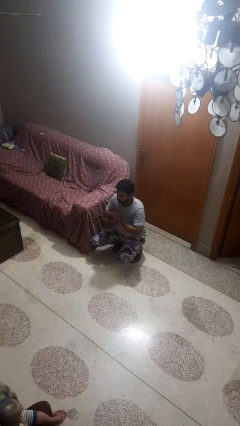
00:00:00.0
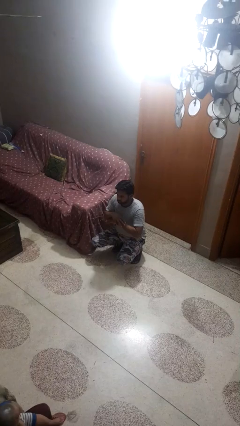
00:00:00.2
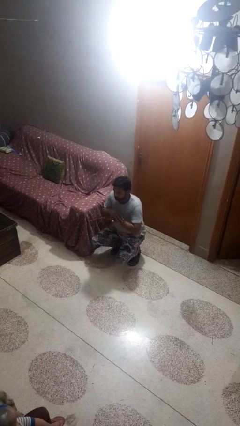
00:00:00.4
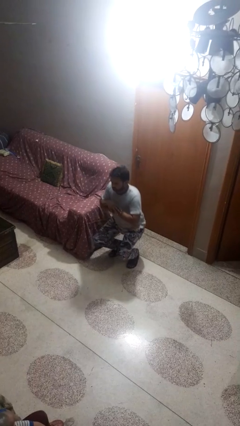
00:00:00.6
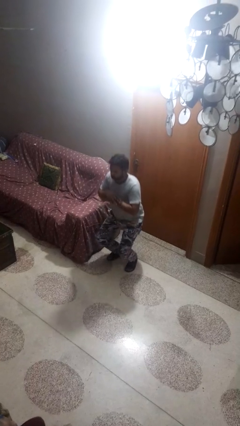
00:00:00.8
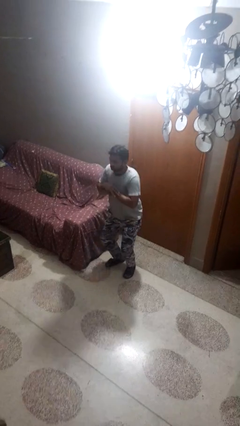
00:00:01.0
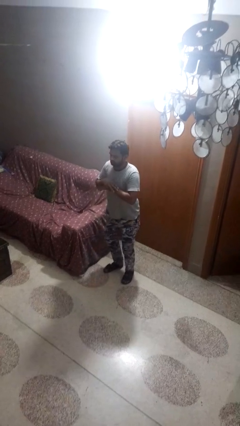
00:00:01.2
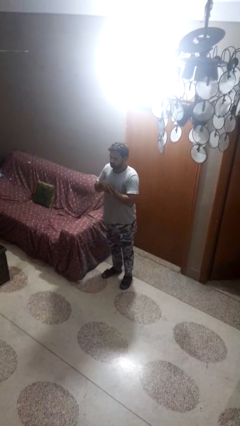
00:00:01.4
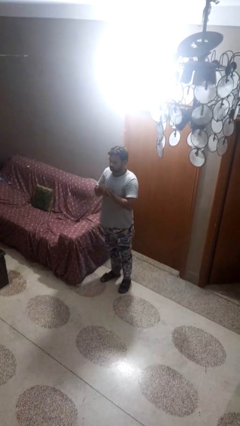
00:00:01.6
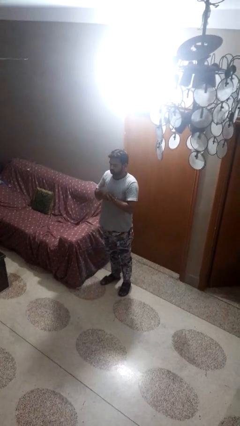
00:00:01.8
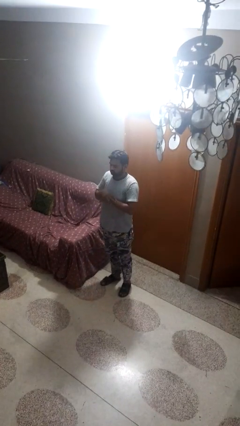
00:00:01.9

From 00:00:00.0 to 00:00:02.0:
person stands up

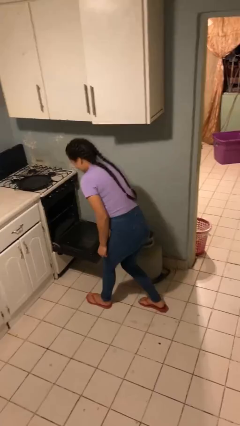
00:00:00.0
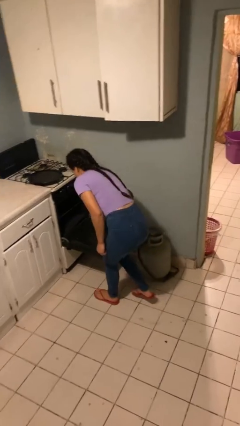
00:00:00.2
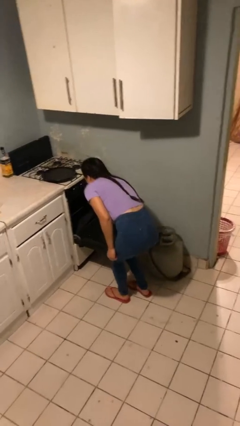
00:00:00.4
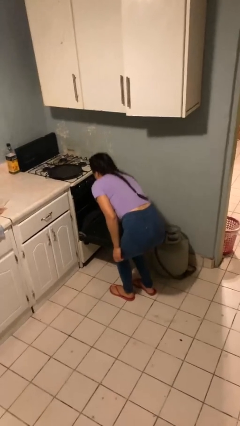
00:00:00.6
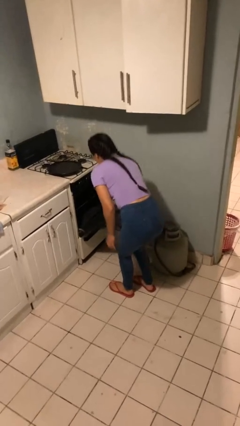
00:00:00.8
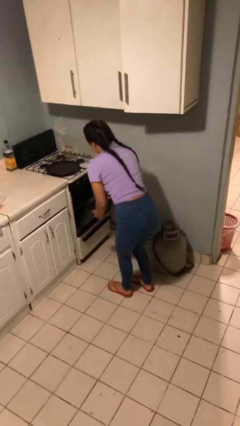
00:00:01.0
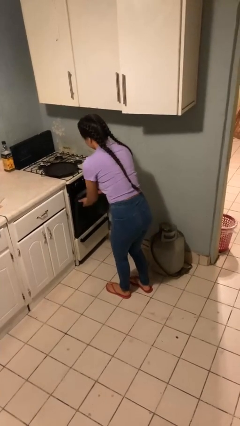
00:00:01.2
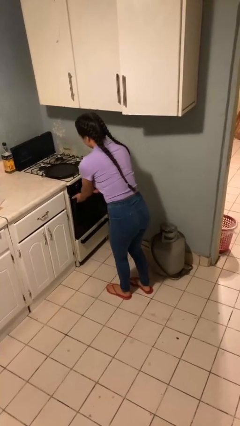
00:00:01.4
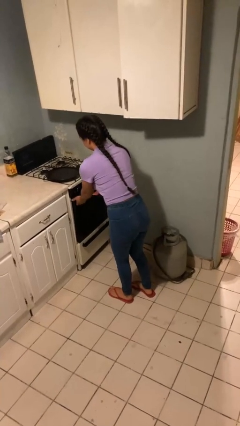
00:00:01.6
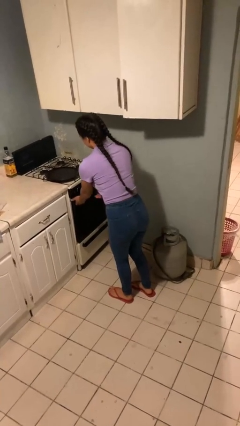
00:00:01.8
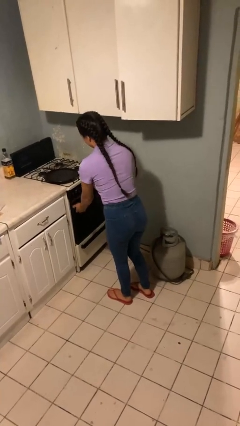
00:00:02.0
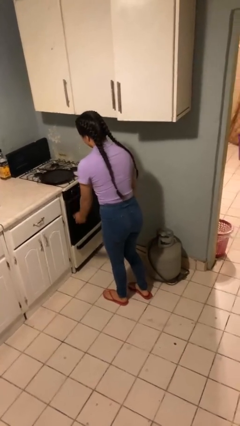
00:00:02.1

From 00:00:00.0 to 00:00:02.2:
person closes oven door

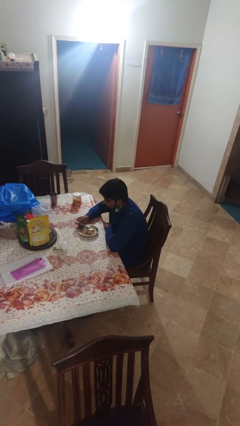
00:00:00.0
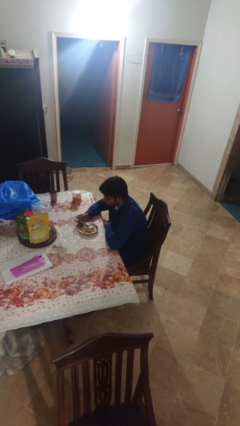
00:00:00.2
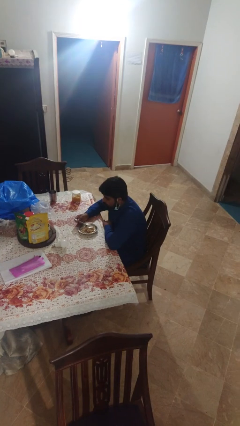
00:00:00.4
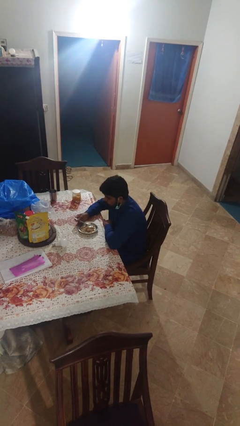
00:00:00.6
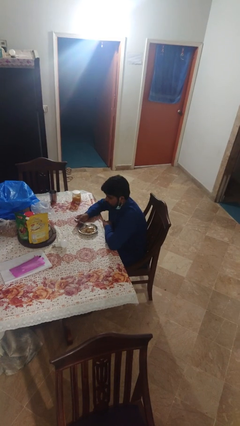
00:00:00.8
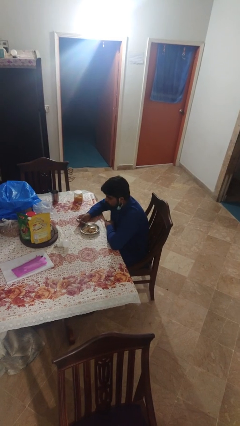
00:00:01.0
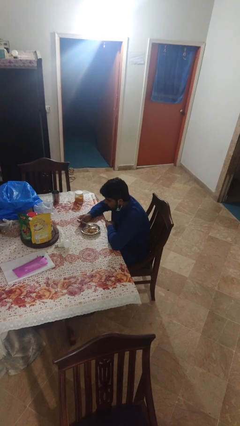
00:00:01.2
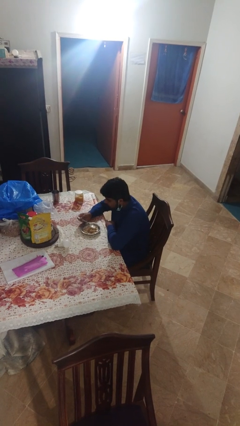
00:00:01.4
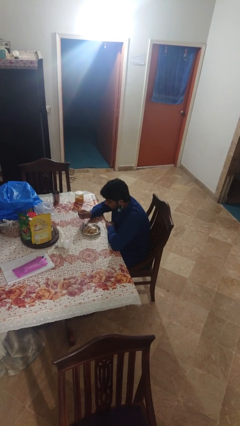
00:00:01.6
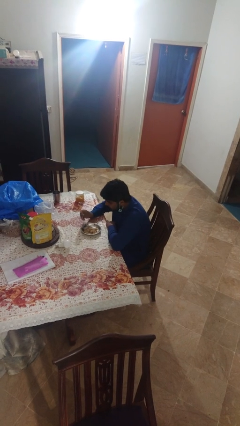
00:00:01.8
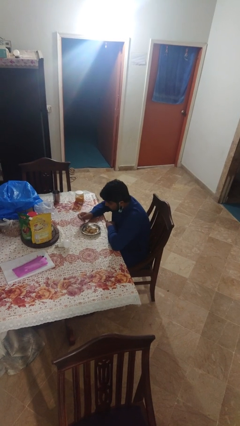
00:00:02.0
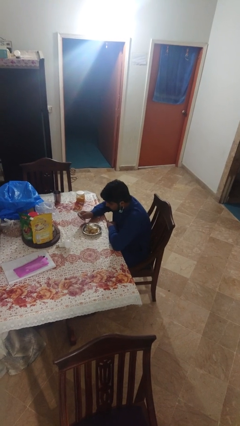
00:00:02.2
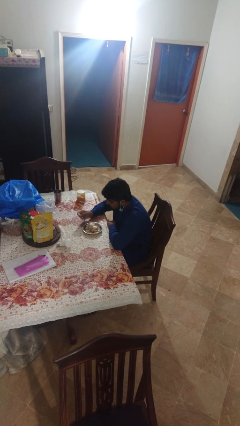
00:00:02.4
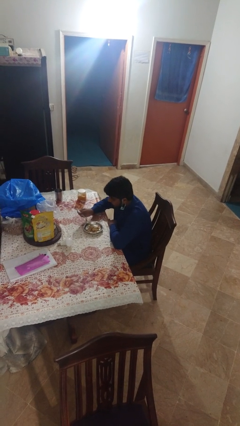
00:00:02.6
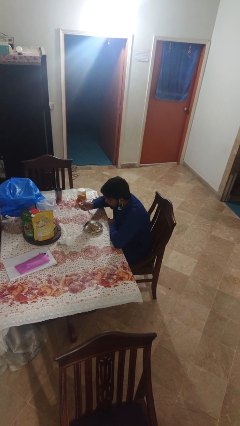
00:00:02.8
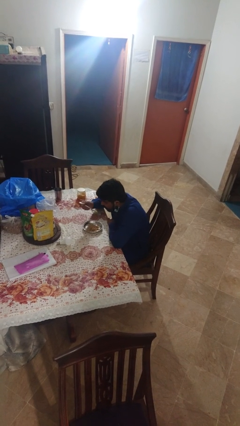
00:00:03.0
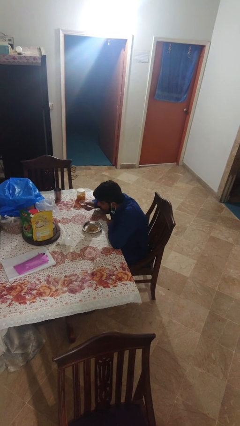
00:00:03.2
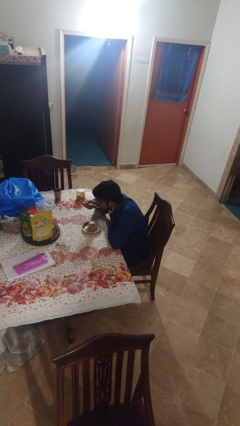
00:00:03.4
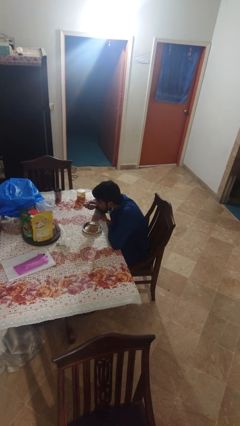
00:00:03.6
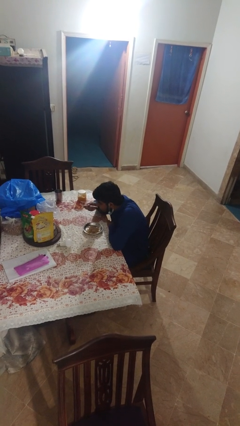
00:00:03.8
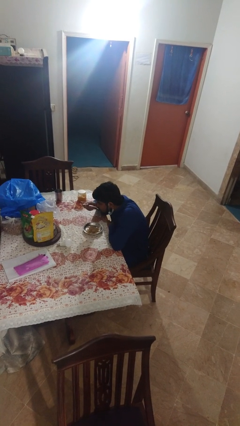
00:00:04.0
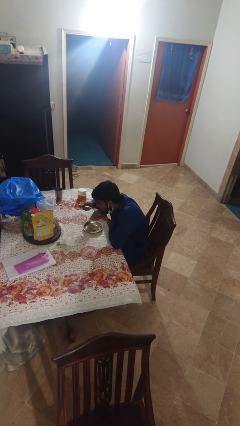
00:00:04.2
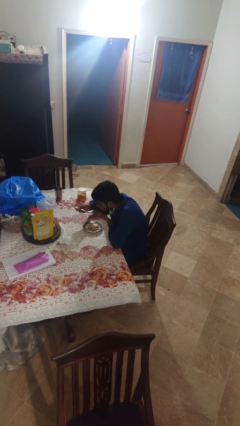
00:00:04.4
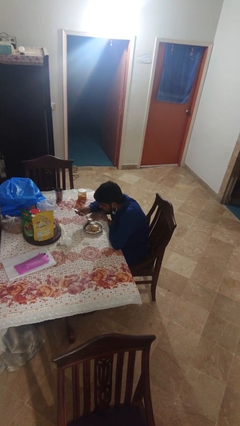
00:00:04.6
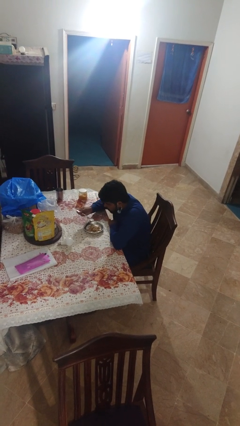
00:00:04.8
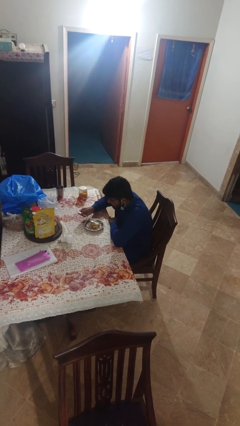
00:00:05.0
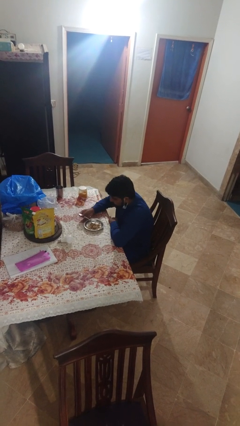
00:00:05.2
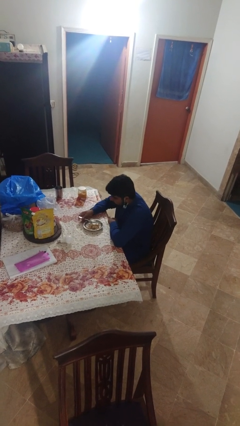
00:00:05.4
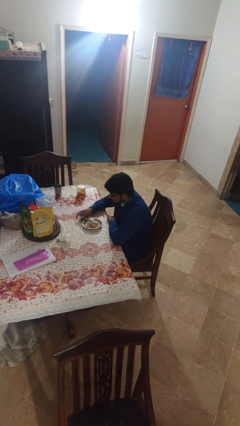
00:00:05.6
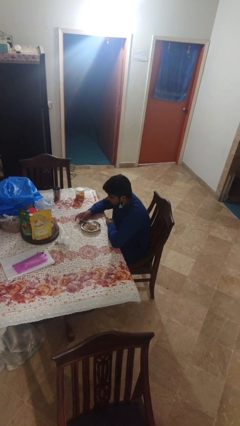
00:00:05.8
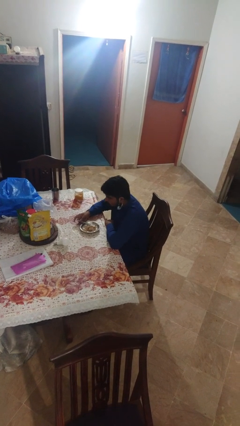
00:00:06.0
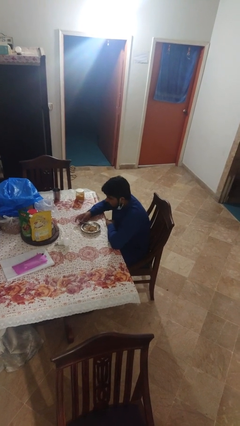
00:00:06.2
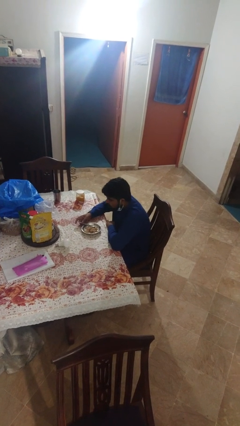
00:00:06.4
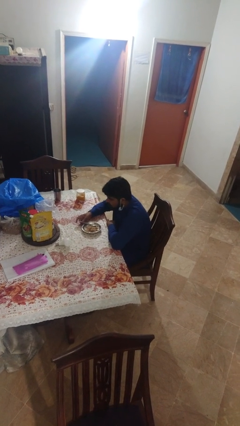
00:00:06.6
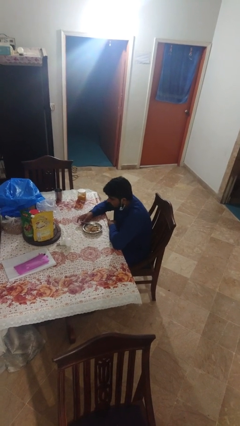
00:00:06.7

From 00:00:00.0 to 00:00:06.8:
person eats with utensil

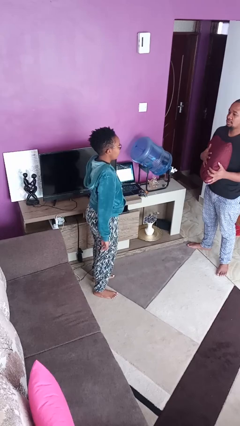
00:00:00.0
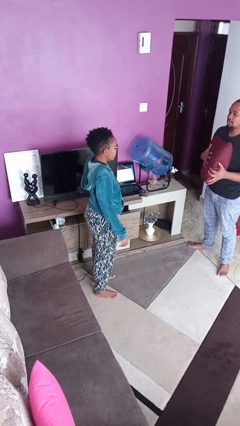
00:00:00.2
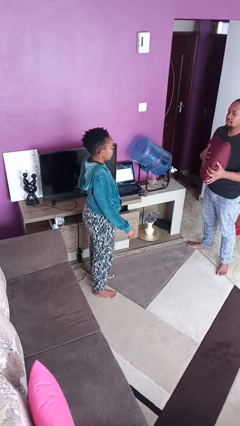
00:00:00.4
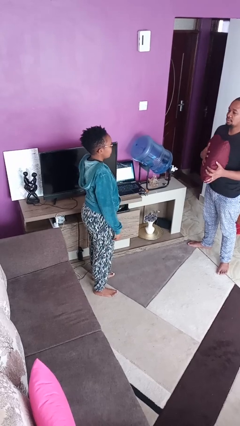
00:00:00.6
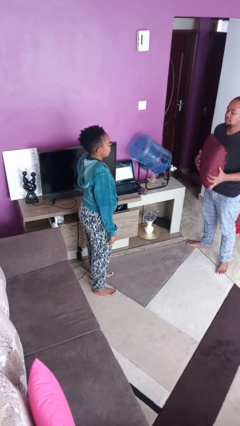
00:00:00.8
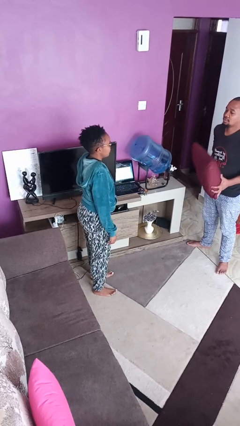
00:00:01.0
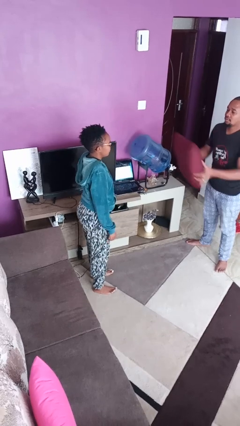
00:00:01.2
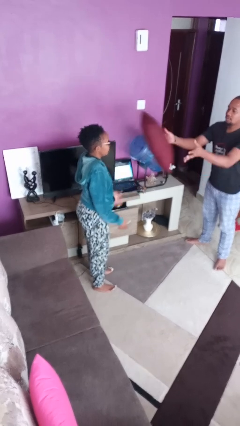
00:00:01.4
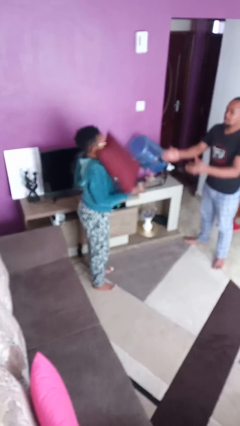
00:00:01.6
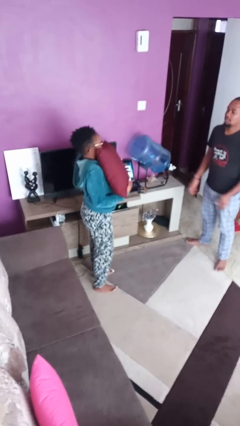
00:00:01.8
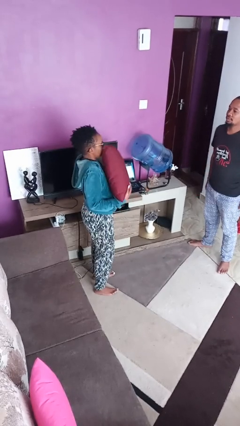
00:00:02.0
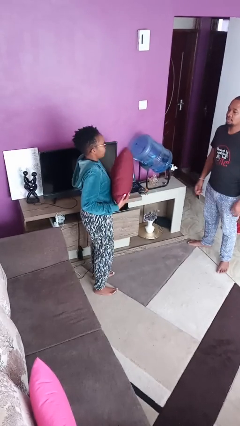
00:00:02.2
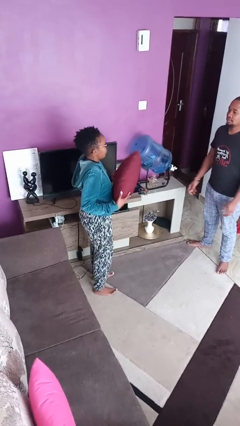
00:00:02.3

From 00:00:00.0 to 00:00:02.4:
person catches object from person

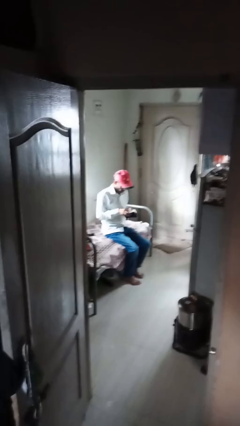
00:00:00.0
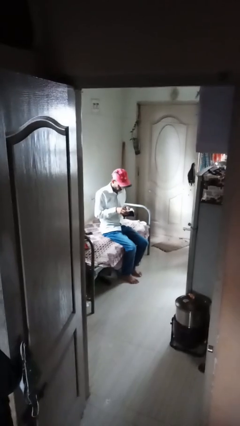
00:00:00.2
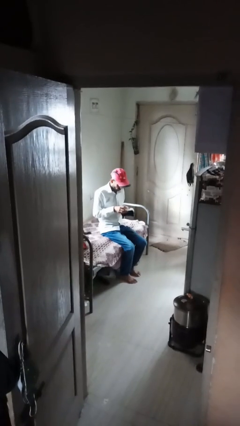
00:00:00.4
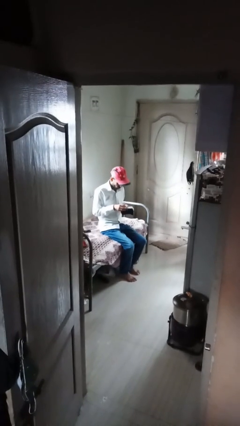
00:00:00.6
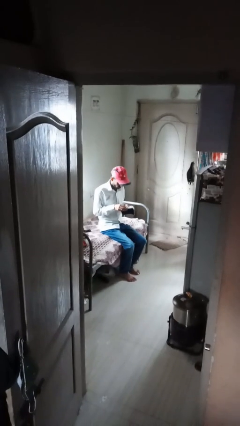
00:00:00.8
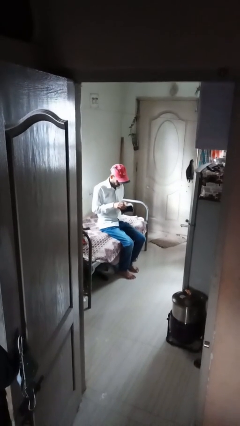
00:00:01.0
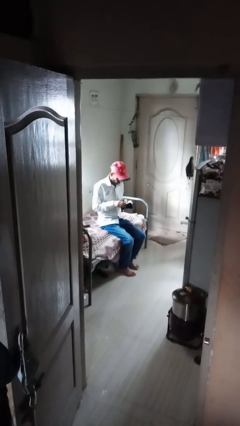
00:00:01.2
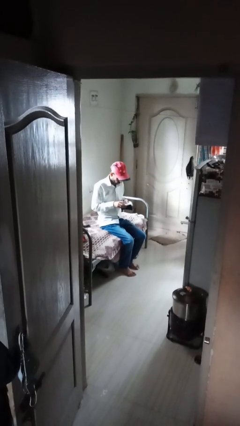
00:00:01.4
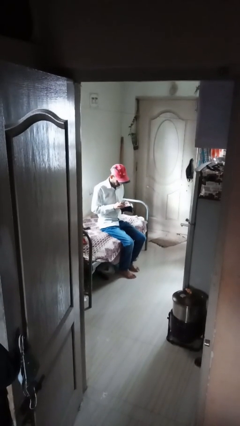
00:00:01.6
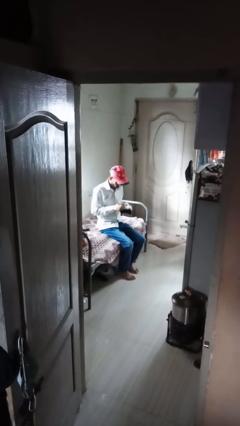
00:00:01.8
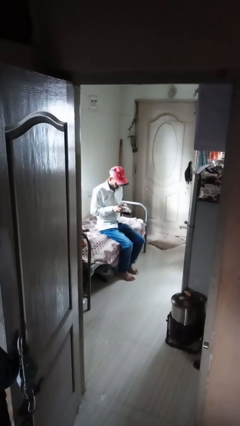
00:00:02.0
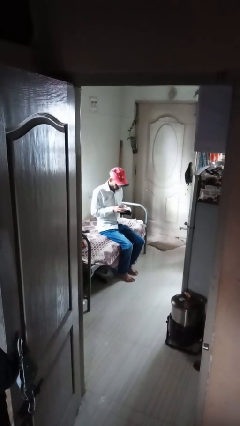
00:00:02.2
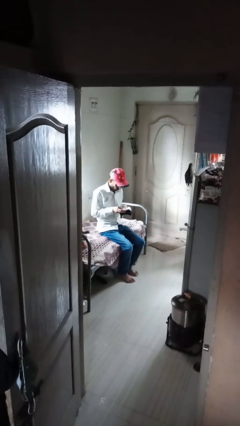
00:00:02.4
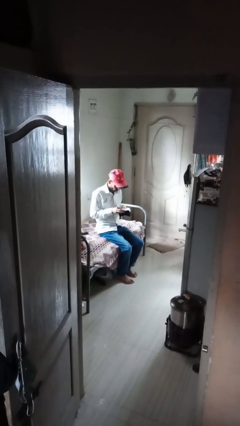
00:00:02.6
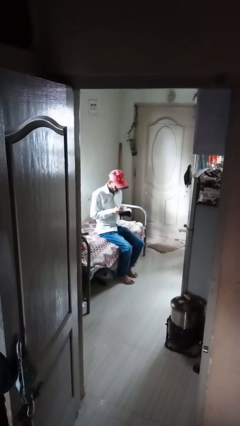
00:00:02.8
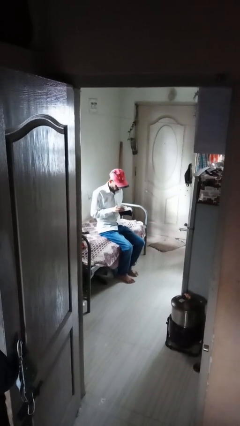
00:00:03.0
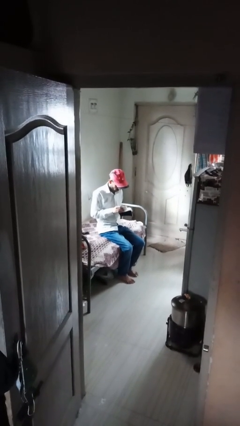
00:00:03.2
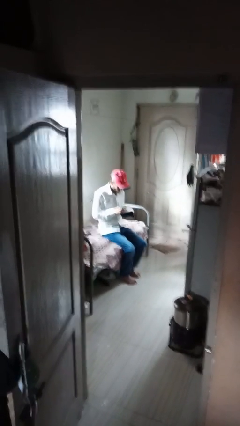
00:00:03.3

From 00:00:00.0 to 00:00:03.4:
person searches in purse

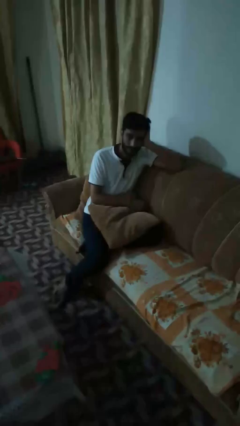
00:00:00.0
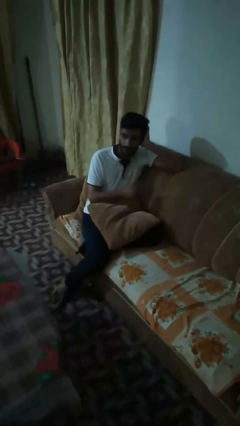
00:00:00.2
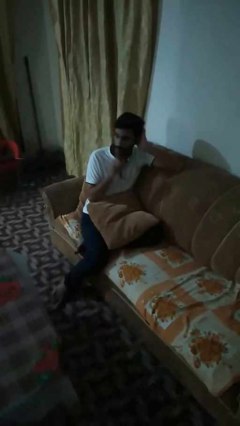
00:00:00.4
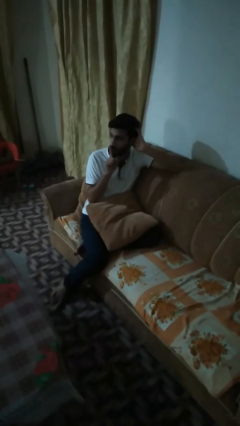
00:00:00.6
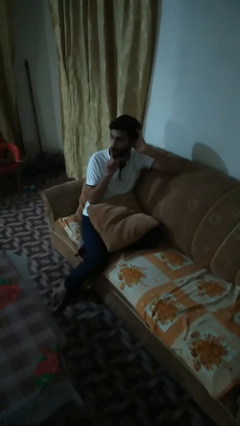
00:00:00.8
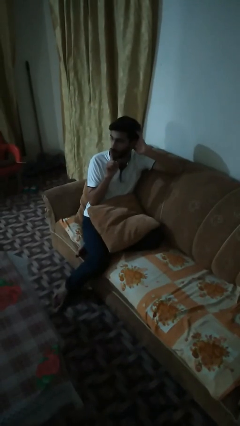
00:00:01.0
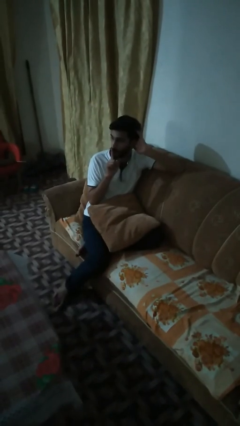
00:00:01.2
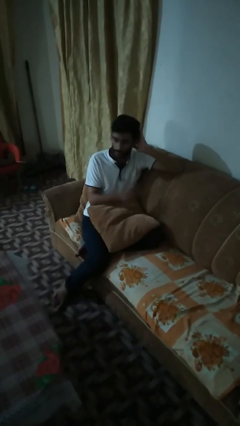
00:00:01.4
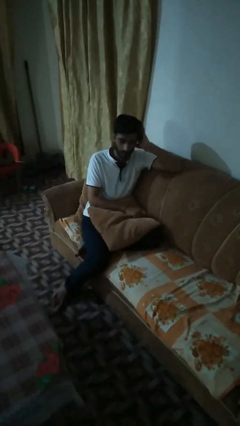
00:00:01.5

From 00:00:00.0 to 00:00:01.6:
person gestures be quiet